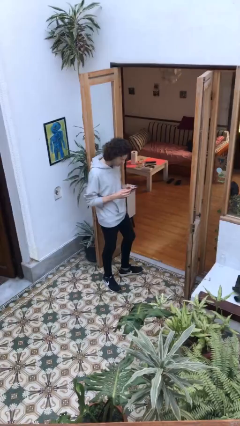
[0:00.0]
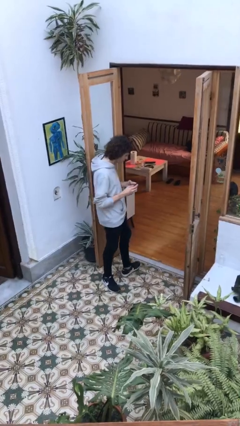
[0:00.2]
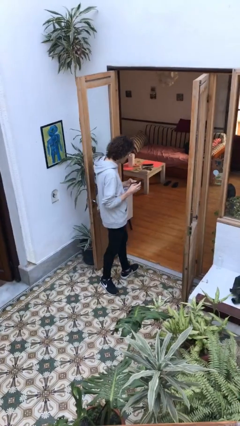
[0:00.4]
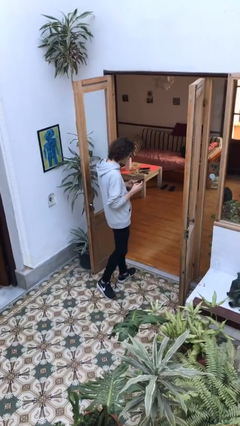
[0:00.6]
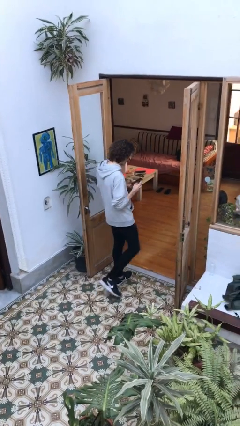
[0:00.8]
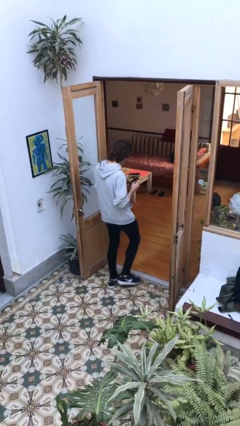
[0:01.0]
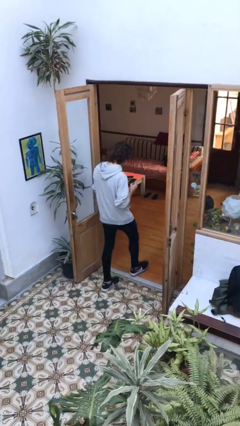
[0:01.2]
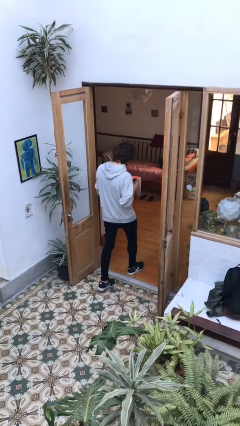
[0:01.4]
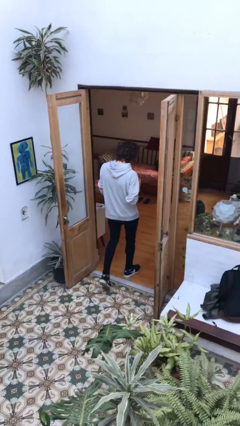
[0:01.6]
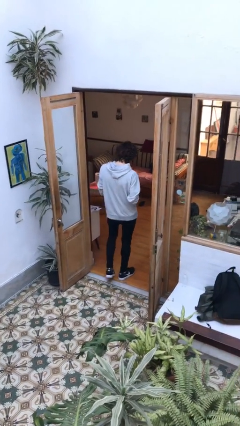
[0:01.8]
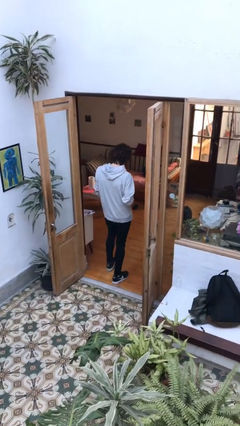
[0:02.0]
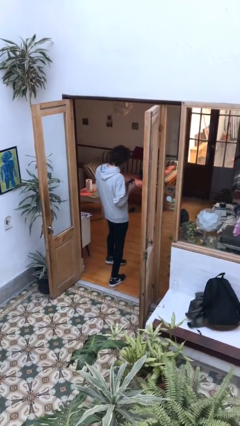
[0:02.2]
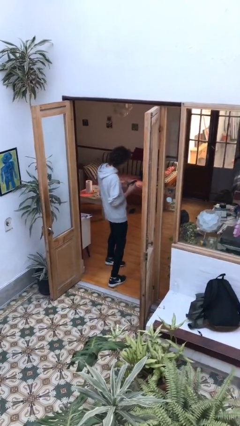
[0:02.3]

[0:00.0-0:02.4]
person exits scene through structure

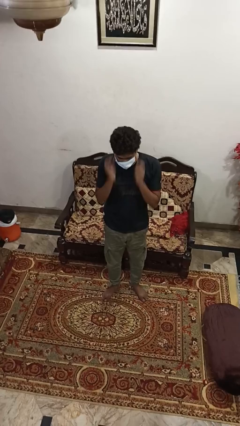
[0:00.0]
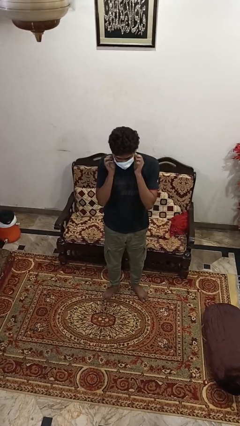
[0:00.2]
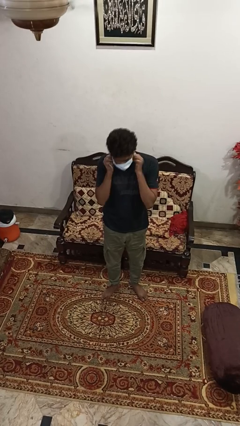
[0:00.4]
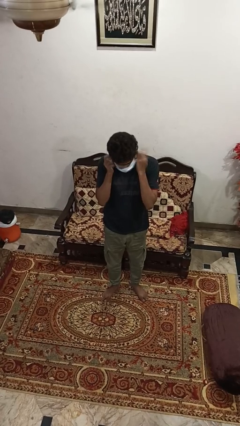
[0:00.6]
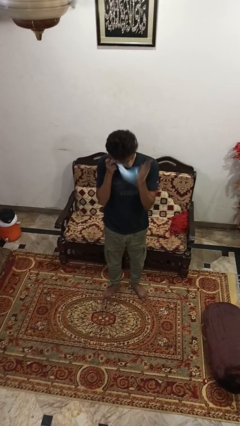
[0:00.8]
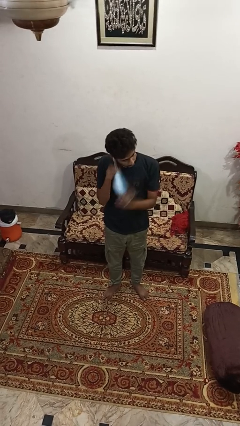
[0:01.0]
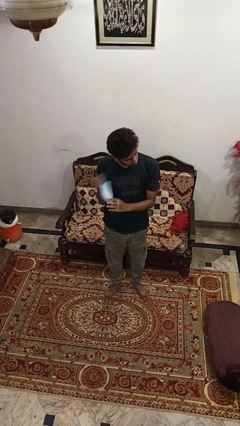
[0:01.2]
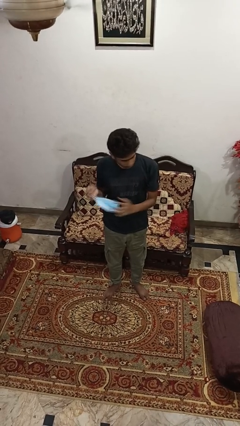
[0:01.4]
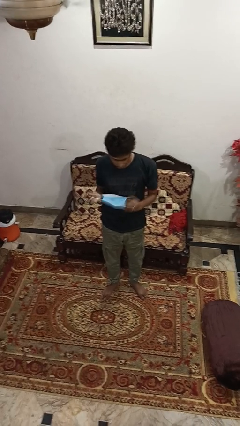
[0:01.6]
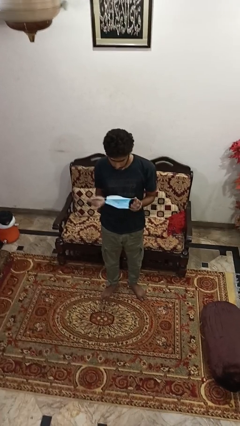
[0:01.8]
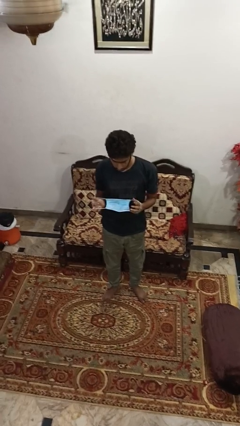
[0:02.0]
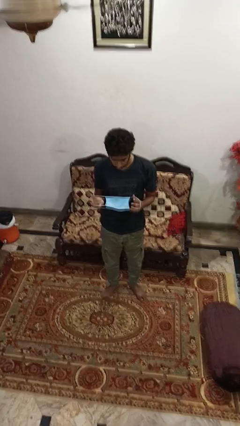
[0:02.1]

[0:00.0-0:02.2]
person takes off facemask

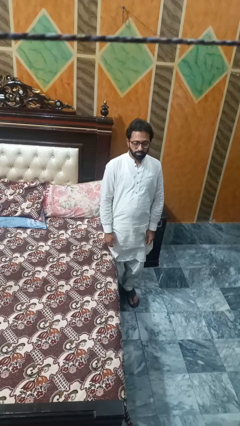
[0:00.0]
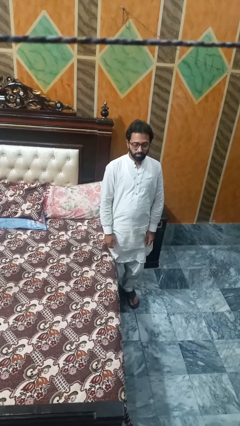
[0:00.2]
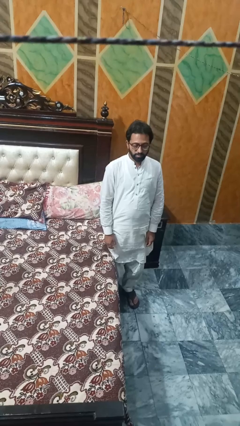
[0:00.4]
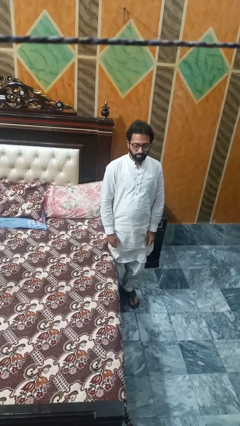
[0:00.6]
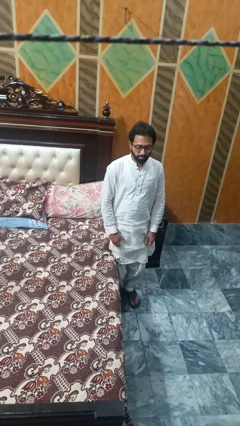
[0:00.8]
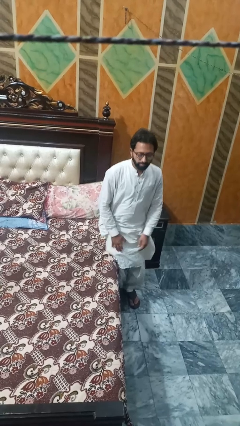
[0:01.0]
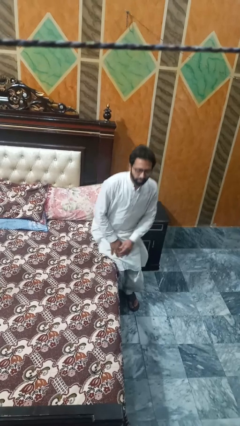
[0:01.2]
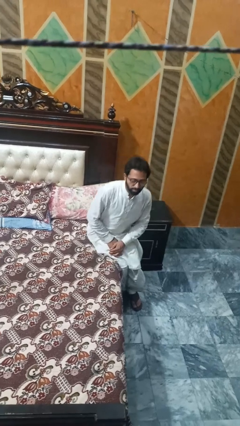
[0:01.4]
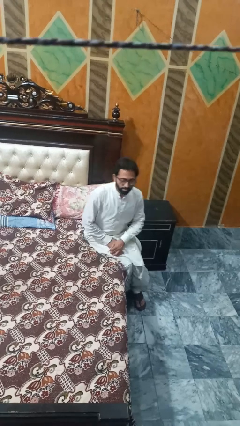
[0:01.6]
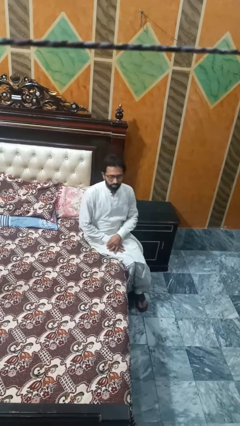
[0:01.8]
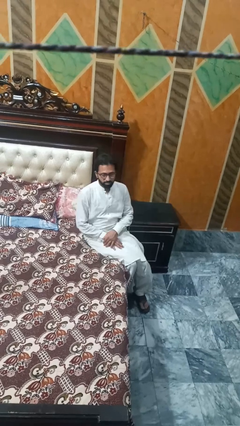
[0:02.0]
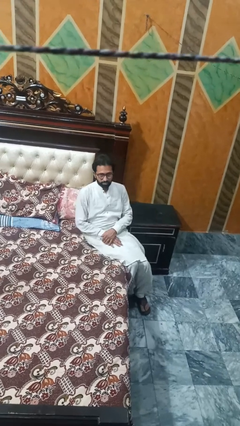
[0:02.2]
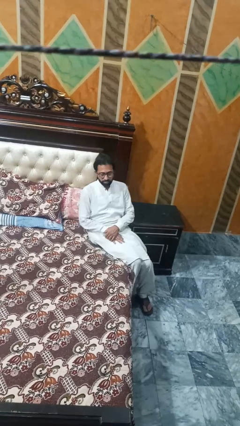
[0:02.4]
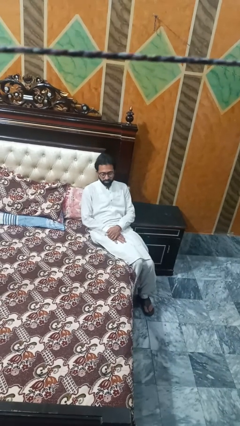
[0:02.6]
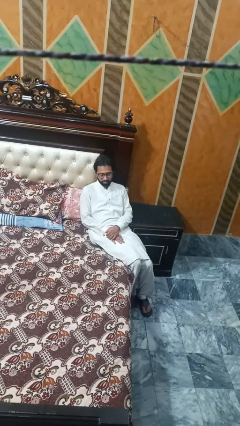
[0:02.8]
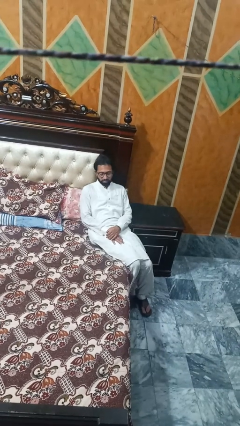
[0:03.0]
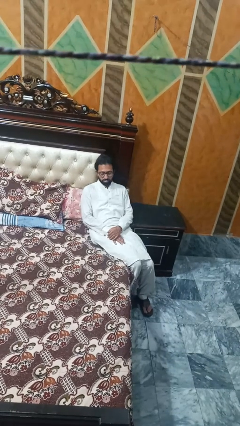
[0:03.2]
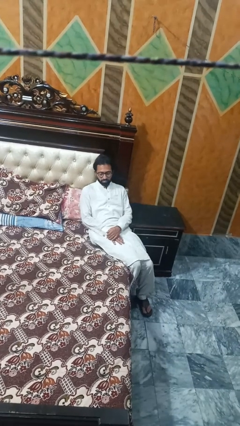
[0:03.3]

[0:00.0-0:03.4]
person lies down on bed

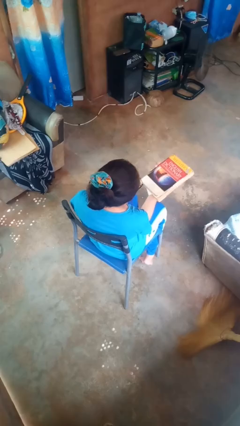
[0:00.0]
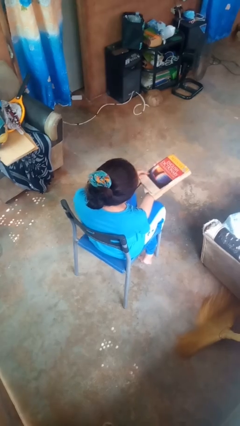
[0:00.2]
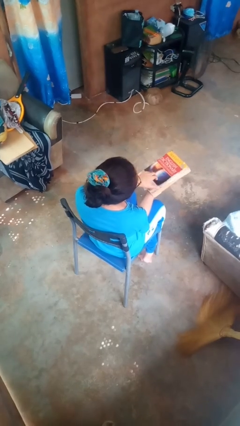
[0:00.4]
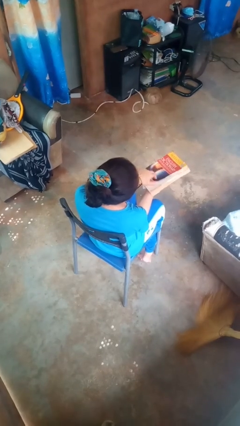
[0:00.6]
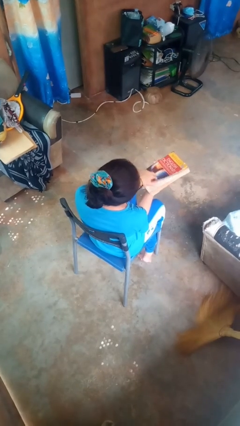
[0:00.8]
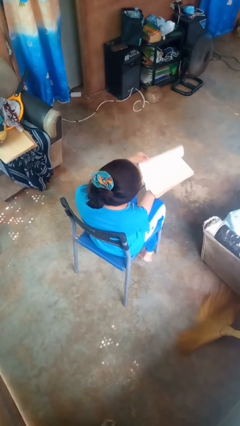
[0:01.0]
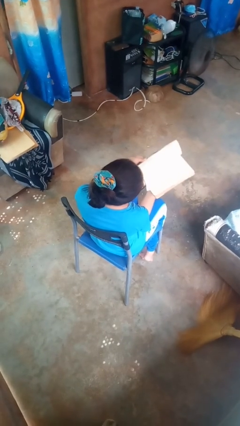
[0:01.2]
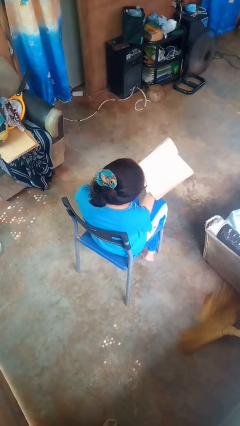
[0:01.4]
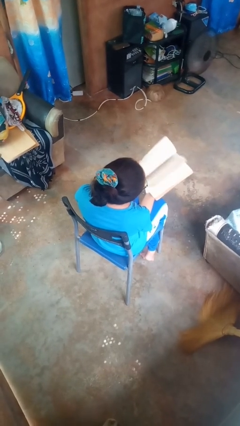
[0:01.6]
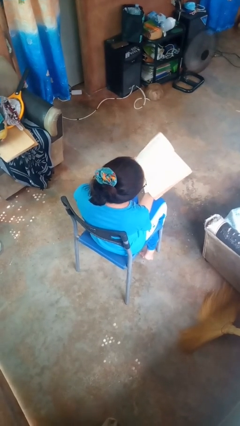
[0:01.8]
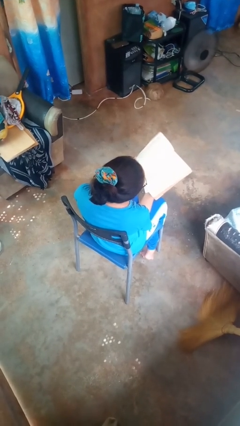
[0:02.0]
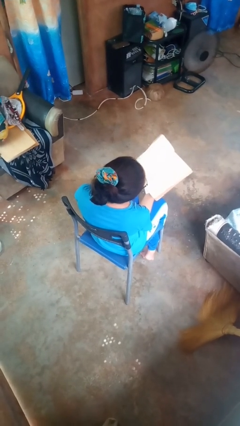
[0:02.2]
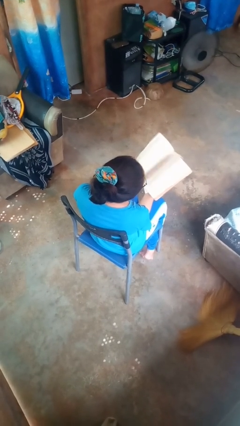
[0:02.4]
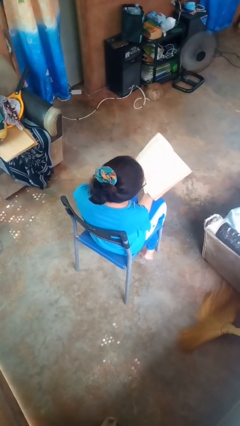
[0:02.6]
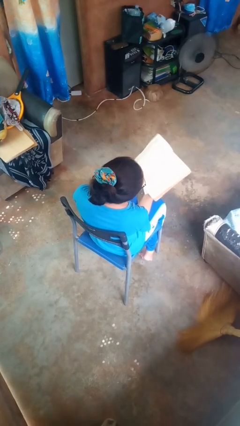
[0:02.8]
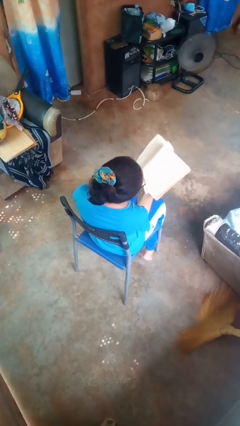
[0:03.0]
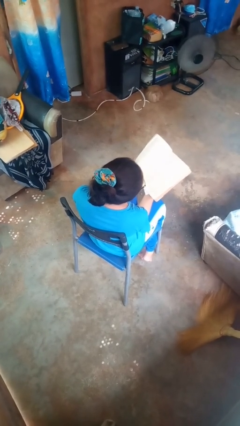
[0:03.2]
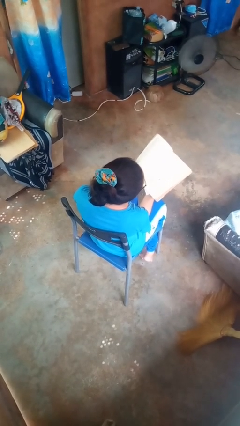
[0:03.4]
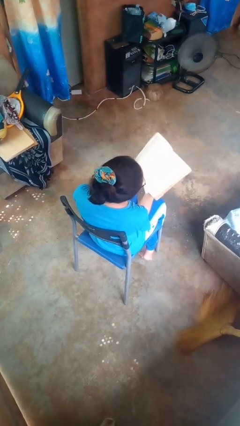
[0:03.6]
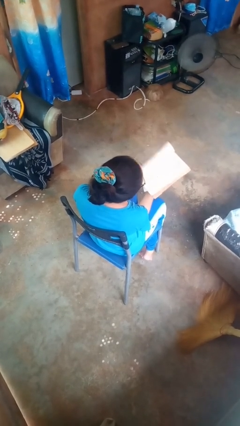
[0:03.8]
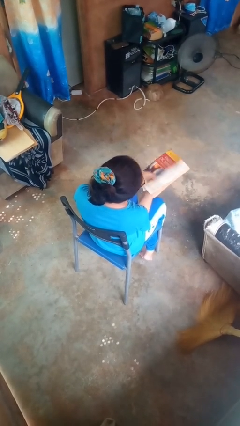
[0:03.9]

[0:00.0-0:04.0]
person reads book

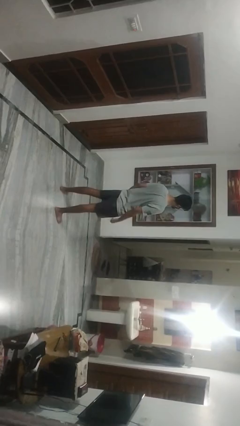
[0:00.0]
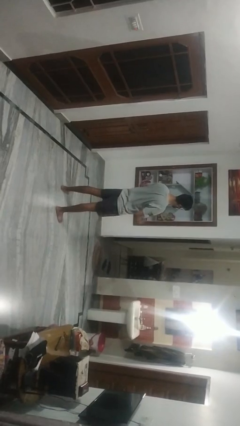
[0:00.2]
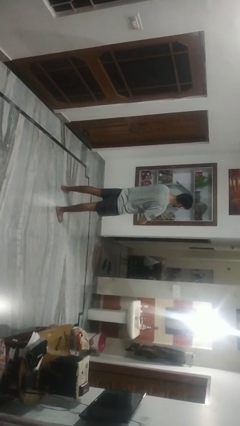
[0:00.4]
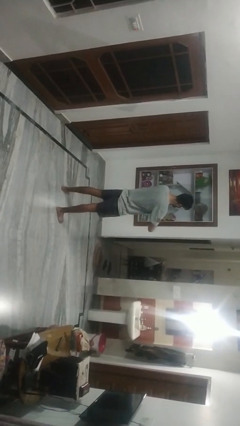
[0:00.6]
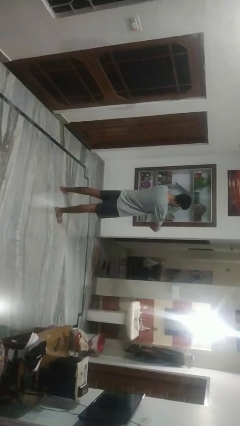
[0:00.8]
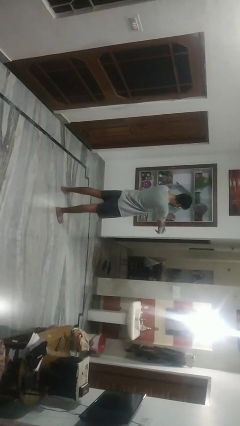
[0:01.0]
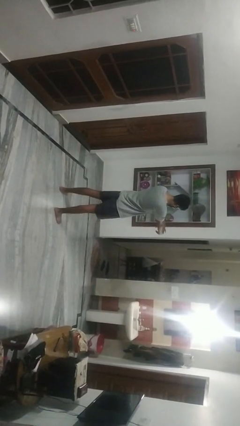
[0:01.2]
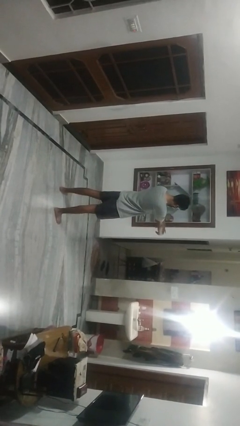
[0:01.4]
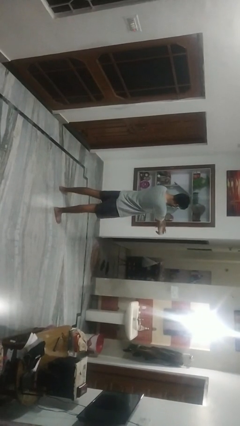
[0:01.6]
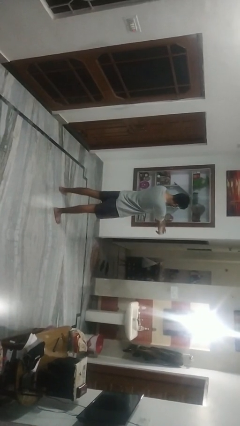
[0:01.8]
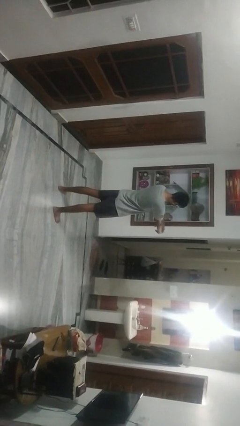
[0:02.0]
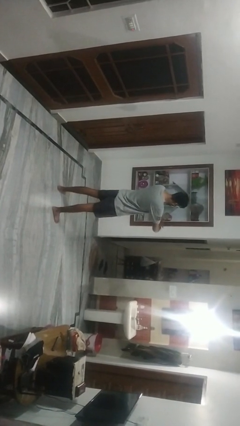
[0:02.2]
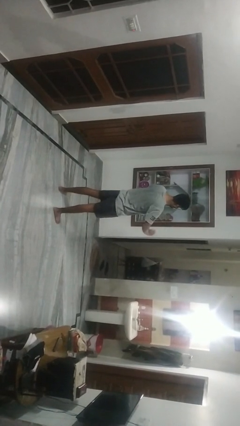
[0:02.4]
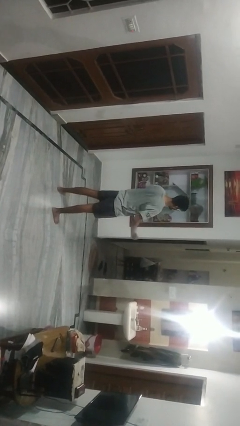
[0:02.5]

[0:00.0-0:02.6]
person cracks knuckles

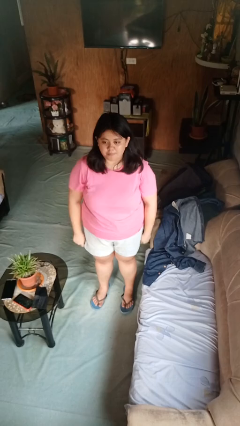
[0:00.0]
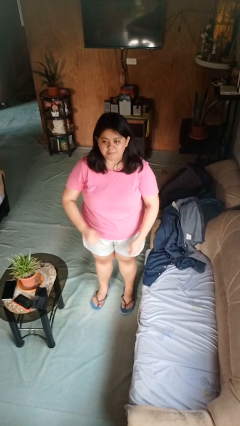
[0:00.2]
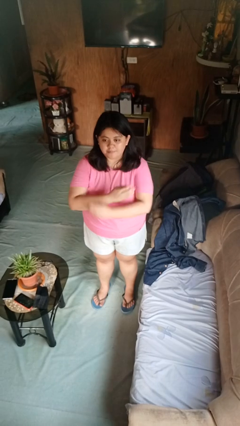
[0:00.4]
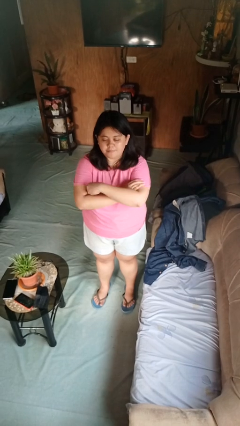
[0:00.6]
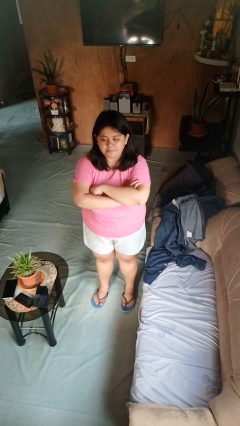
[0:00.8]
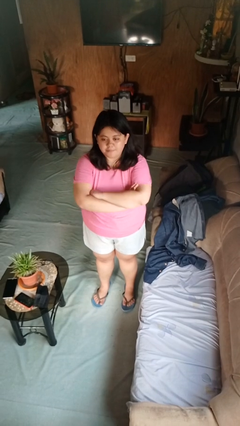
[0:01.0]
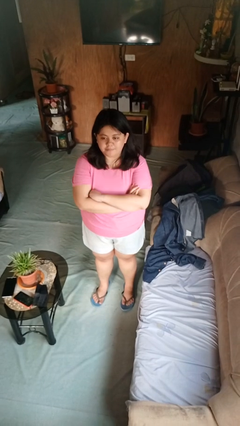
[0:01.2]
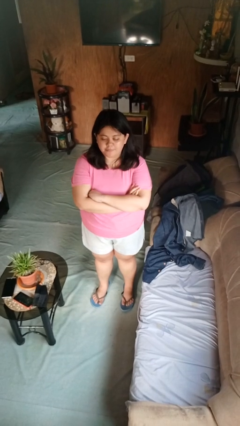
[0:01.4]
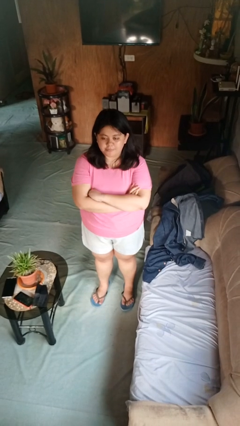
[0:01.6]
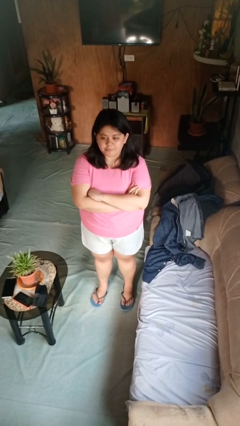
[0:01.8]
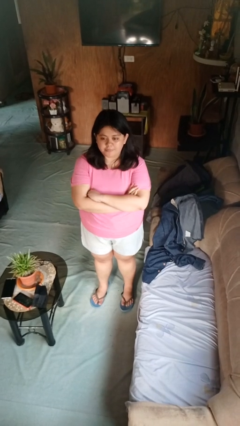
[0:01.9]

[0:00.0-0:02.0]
person crosses arms

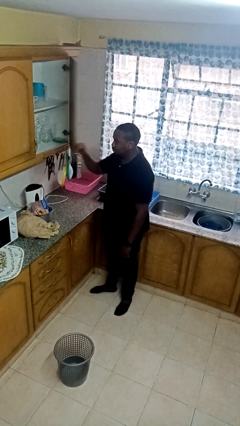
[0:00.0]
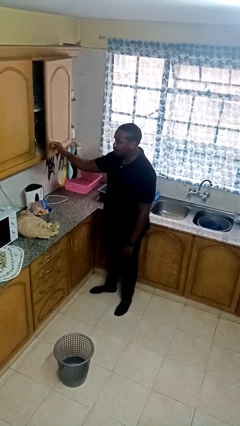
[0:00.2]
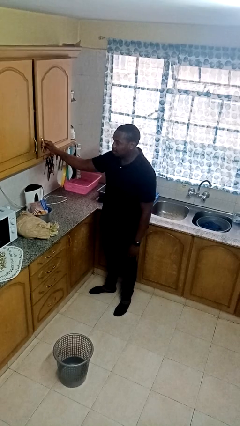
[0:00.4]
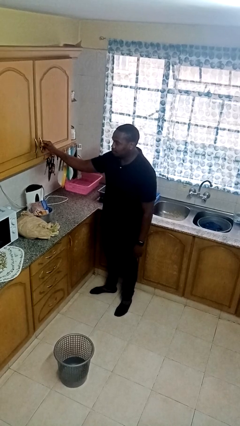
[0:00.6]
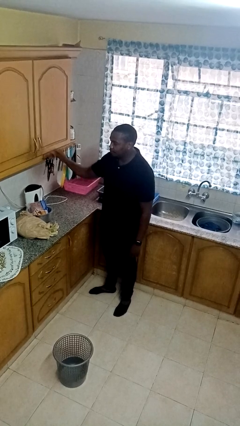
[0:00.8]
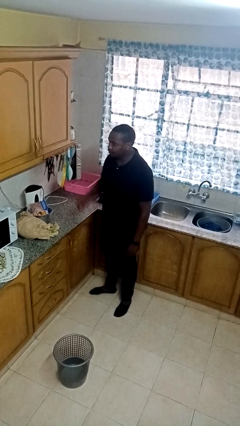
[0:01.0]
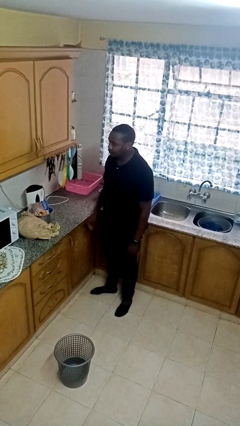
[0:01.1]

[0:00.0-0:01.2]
person closes cabinet
